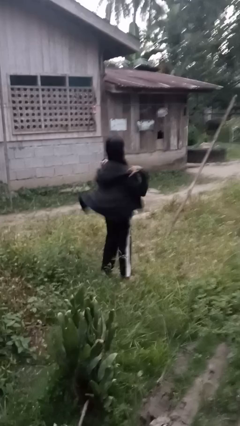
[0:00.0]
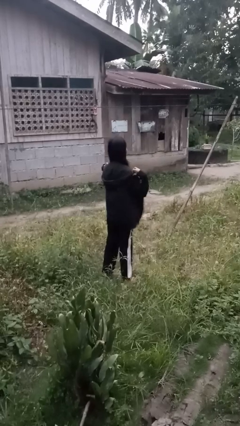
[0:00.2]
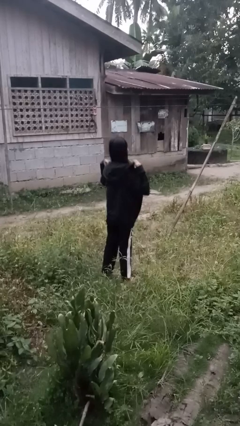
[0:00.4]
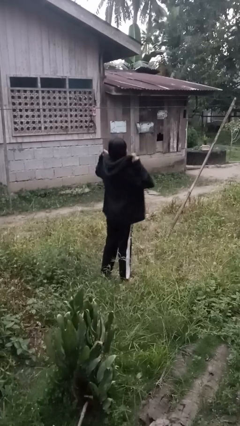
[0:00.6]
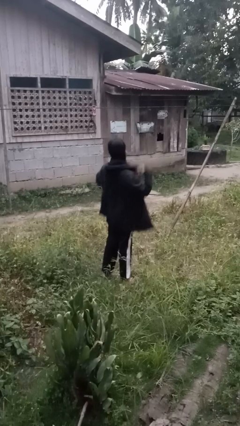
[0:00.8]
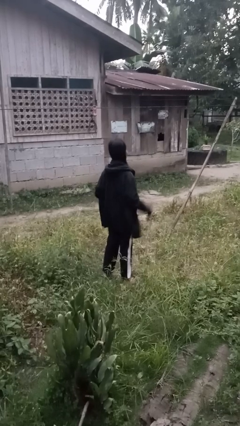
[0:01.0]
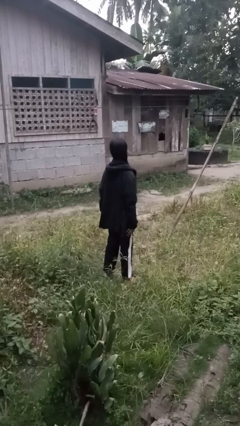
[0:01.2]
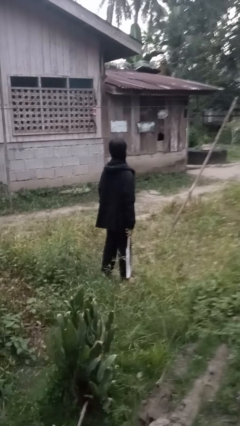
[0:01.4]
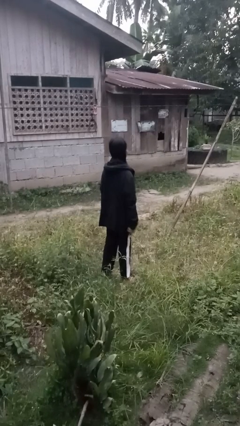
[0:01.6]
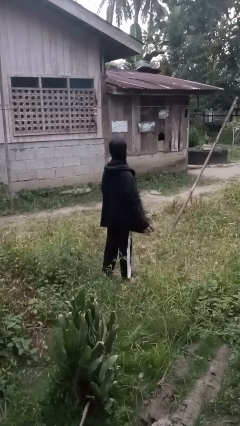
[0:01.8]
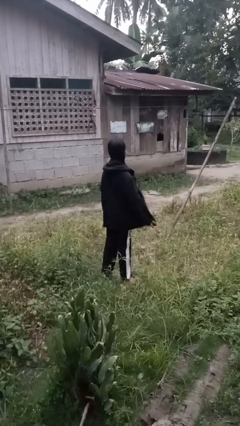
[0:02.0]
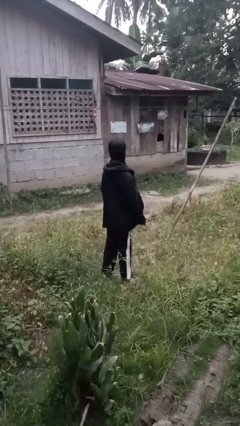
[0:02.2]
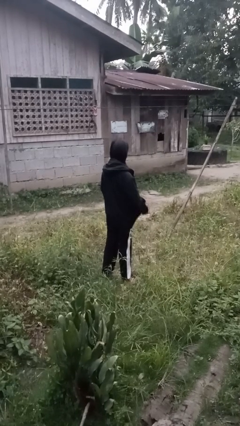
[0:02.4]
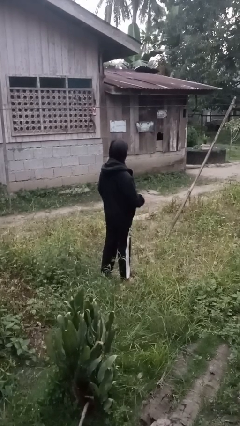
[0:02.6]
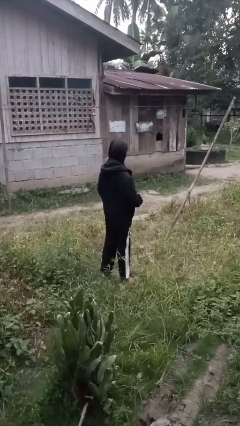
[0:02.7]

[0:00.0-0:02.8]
person puts on jacket

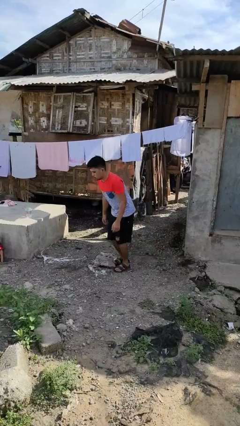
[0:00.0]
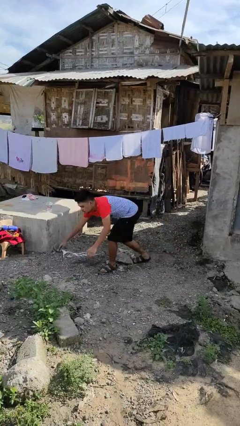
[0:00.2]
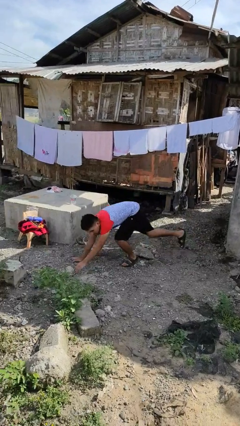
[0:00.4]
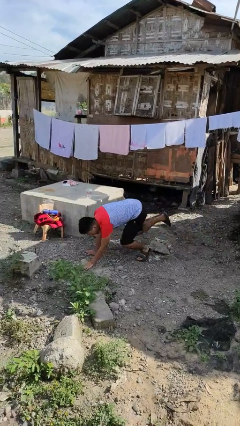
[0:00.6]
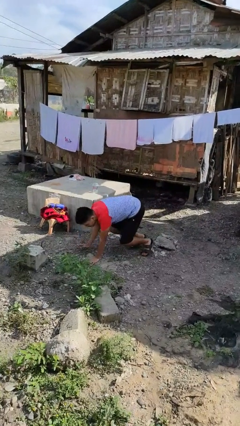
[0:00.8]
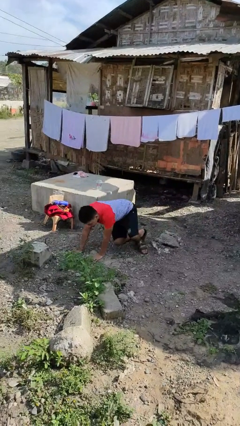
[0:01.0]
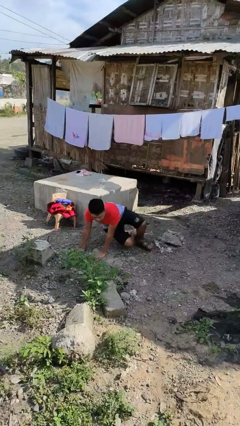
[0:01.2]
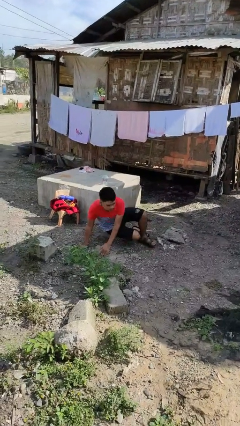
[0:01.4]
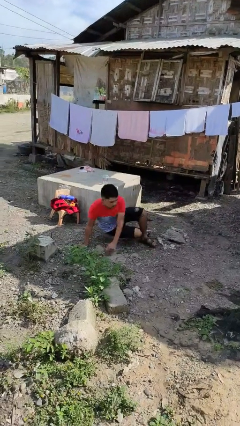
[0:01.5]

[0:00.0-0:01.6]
person trips on object on floor

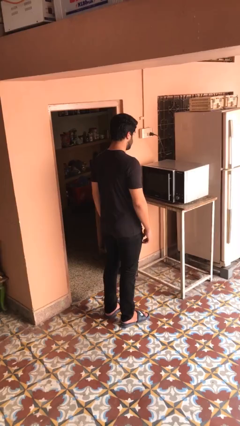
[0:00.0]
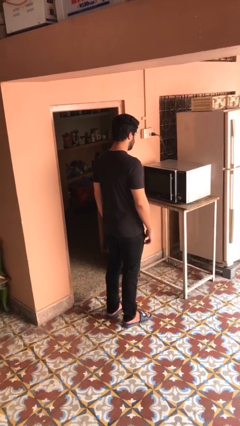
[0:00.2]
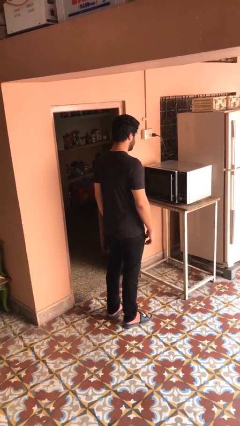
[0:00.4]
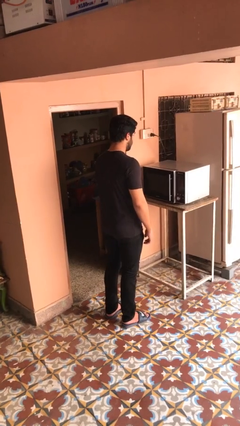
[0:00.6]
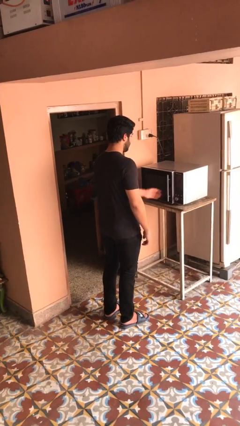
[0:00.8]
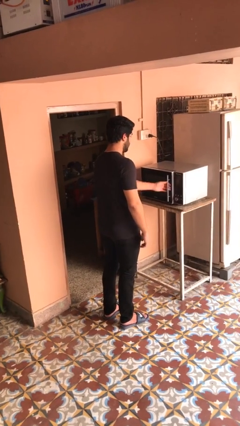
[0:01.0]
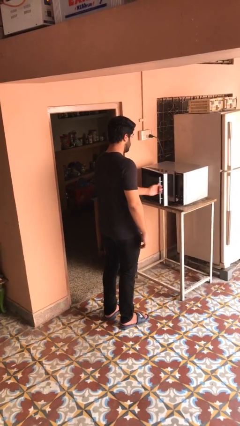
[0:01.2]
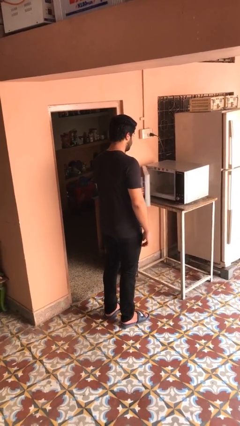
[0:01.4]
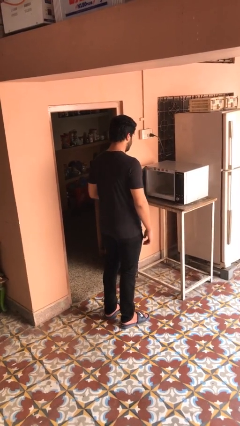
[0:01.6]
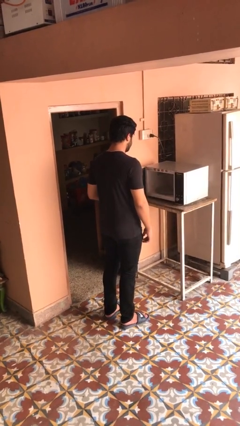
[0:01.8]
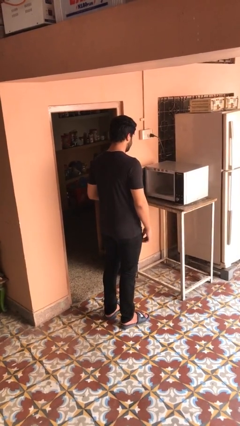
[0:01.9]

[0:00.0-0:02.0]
person opens microwave

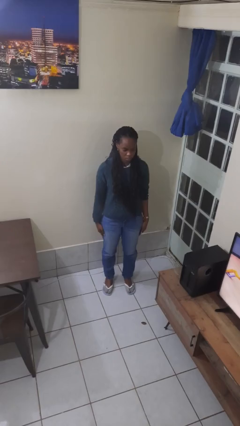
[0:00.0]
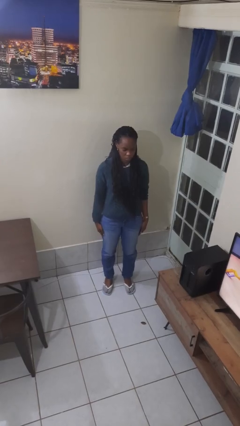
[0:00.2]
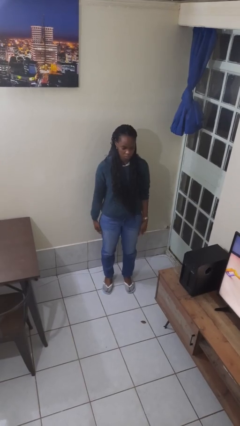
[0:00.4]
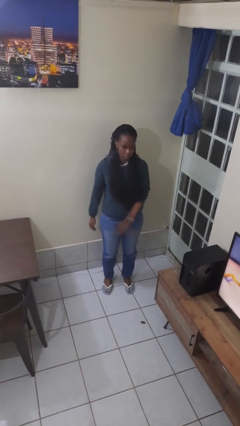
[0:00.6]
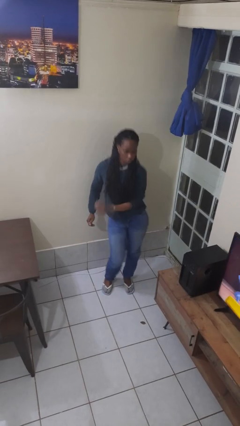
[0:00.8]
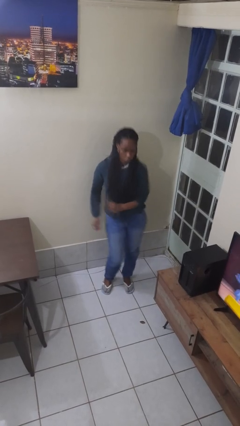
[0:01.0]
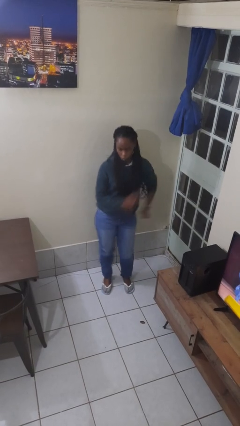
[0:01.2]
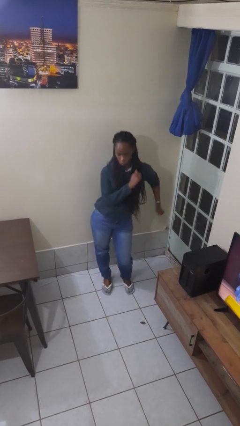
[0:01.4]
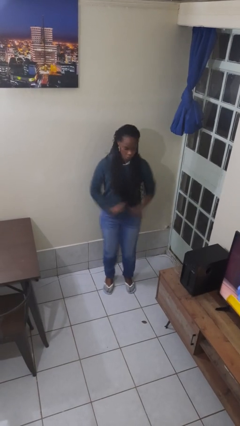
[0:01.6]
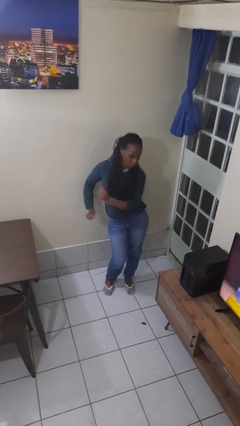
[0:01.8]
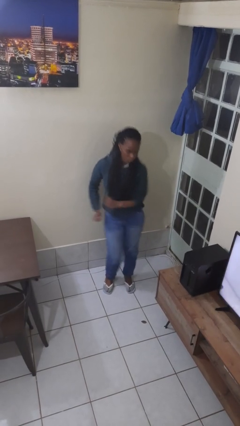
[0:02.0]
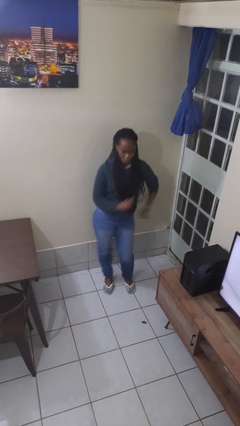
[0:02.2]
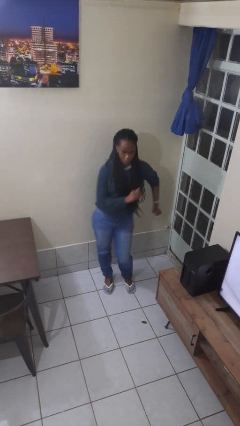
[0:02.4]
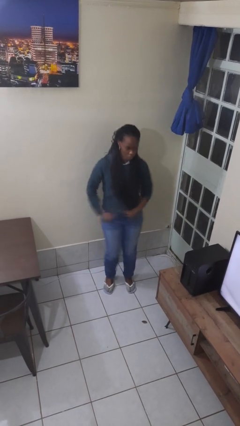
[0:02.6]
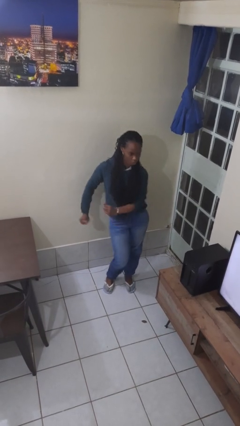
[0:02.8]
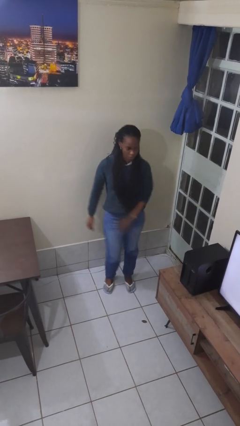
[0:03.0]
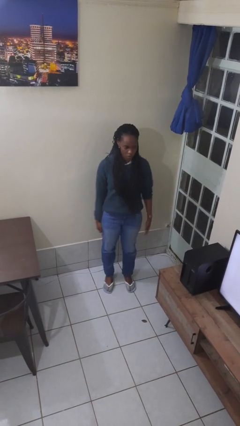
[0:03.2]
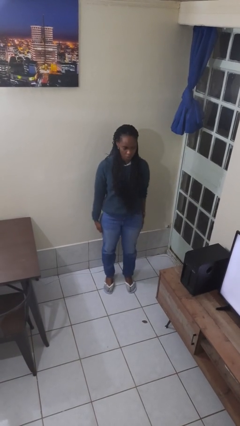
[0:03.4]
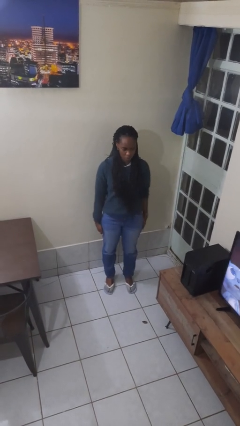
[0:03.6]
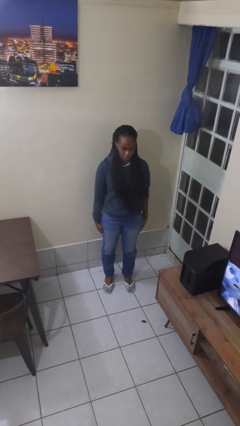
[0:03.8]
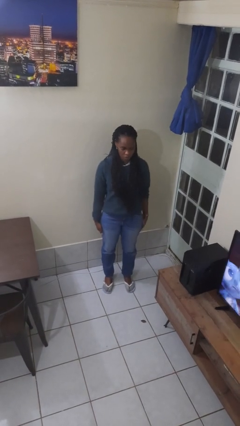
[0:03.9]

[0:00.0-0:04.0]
person wiggles hips

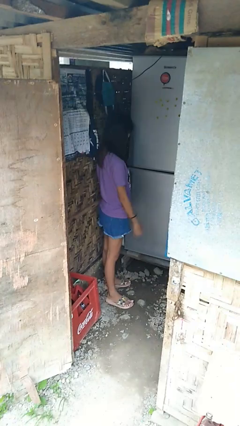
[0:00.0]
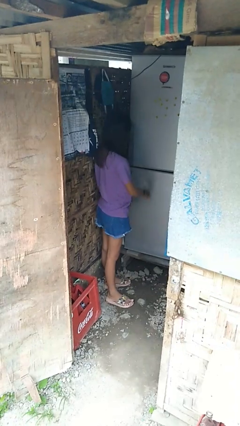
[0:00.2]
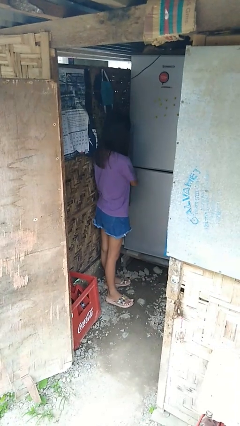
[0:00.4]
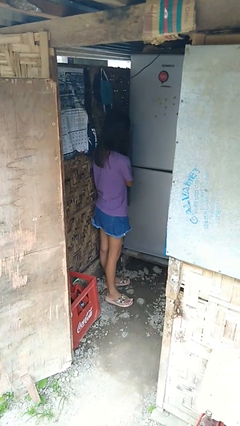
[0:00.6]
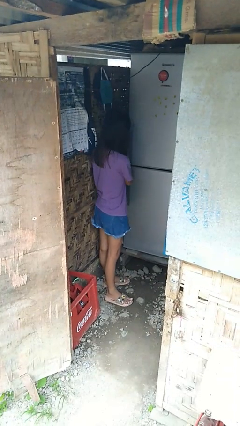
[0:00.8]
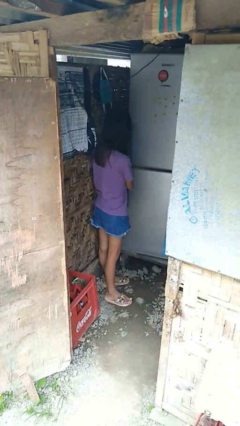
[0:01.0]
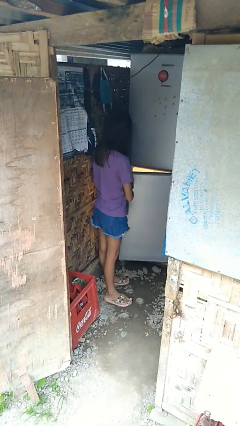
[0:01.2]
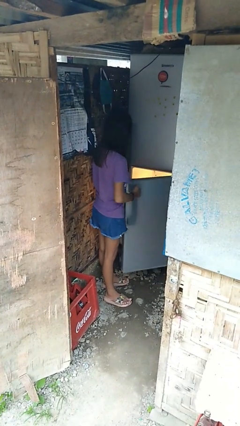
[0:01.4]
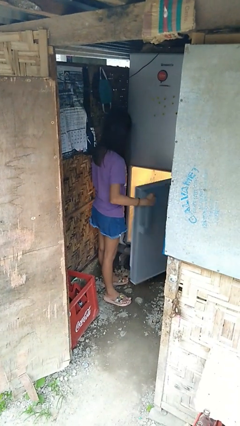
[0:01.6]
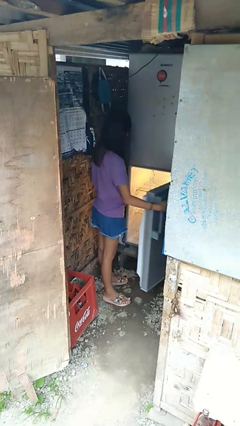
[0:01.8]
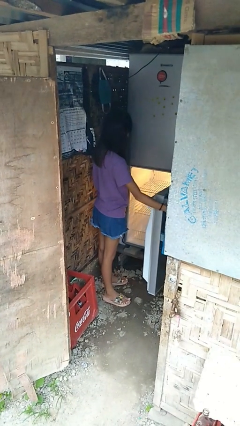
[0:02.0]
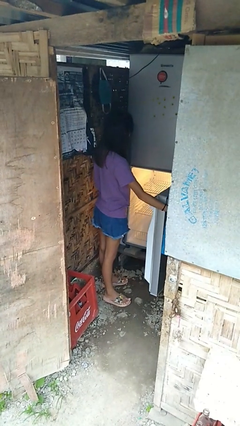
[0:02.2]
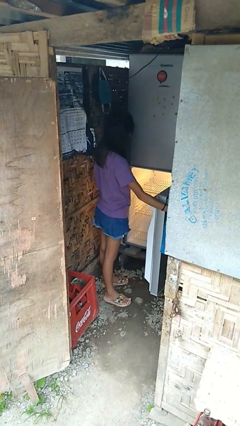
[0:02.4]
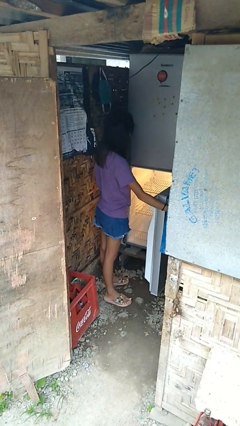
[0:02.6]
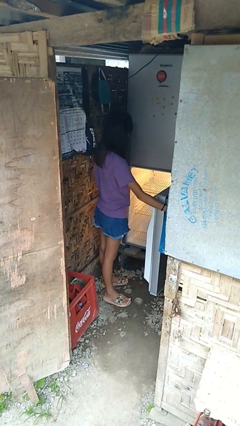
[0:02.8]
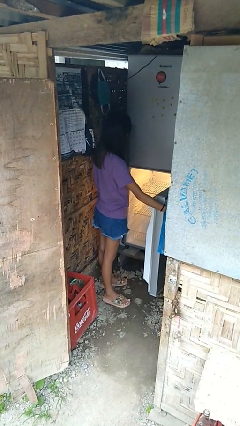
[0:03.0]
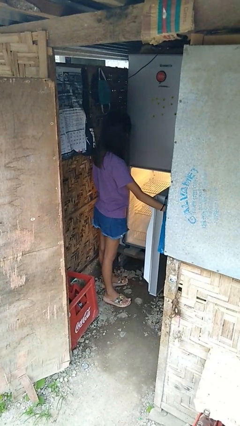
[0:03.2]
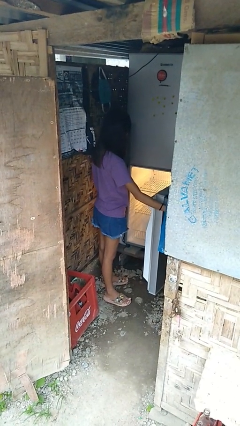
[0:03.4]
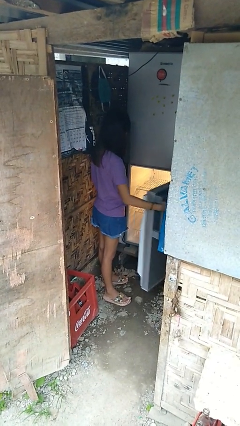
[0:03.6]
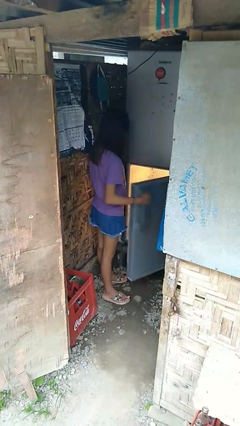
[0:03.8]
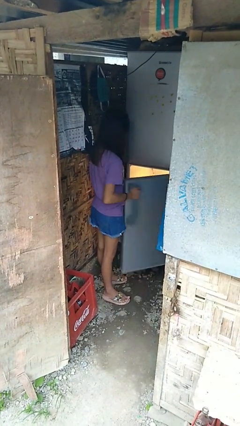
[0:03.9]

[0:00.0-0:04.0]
person opens refrigerator

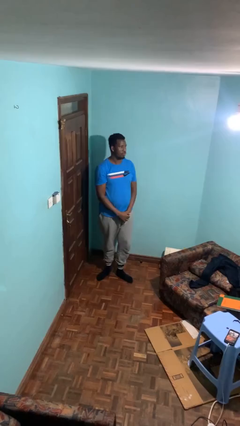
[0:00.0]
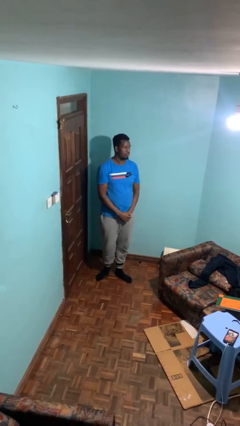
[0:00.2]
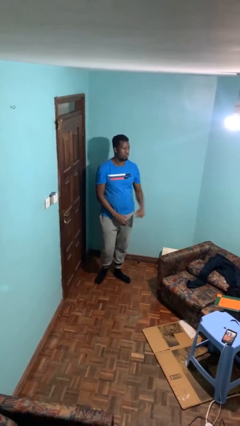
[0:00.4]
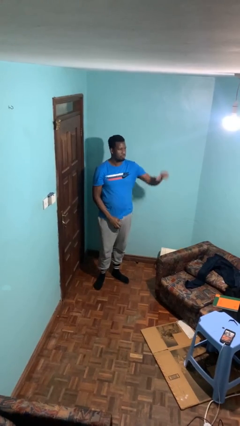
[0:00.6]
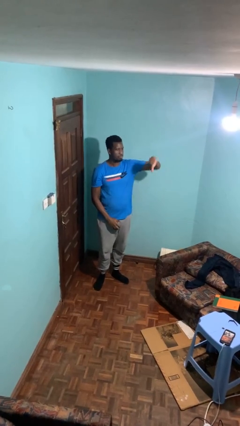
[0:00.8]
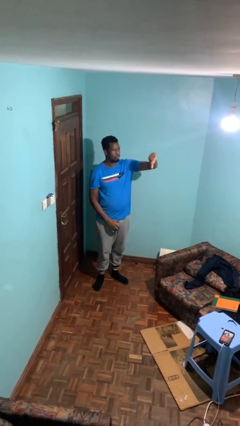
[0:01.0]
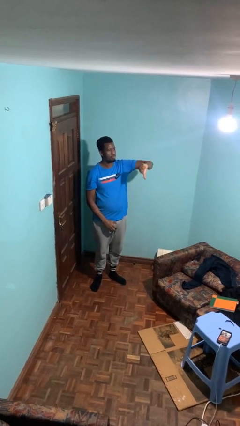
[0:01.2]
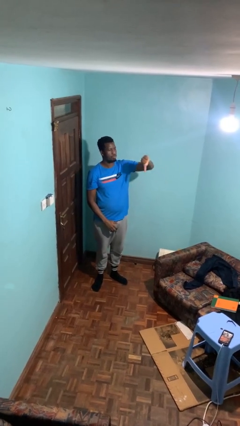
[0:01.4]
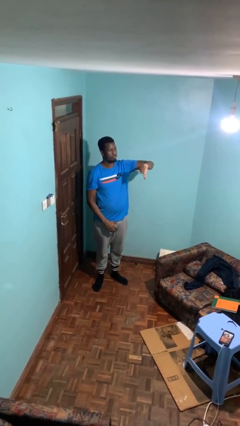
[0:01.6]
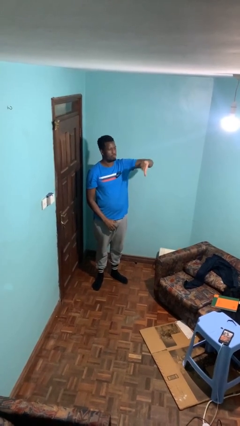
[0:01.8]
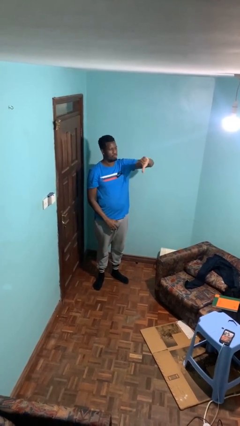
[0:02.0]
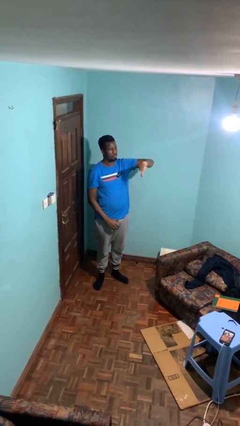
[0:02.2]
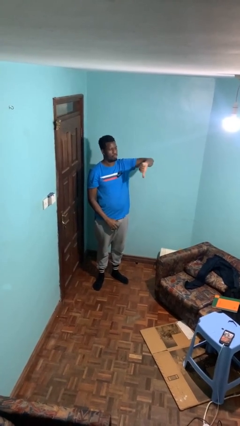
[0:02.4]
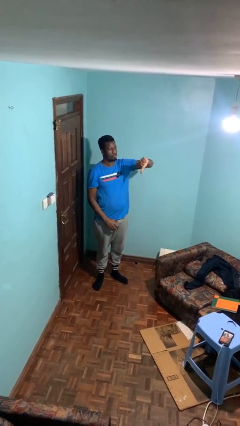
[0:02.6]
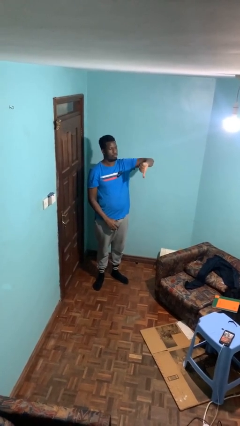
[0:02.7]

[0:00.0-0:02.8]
person gestures thumbs down

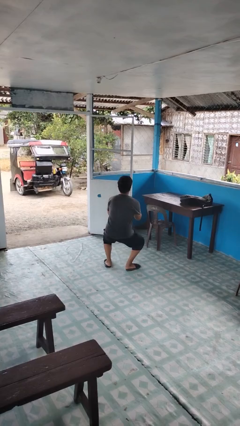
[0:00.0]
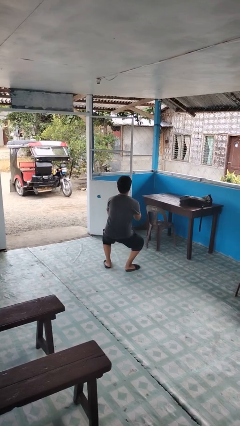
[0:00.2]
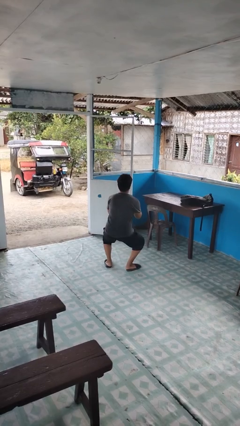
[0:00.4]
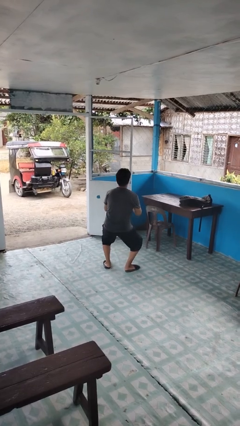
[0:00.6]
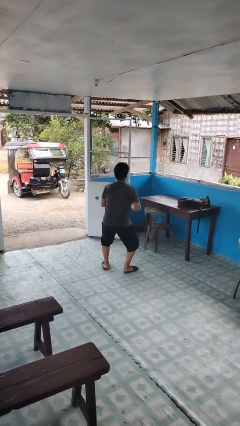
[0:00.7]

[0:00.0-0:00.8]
person stands up
